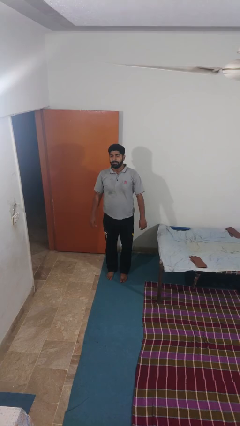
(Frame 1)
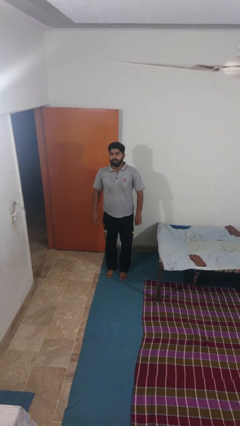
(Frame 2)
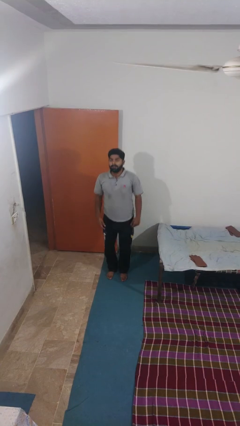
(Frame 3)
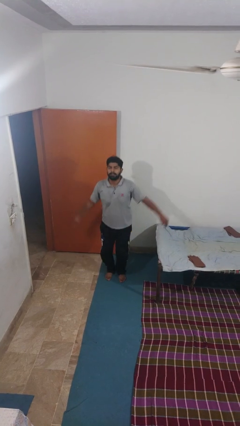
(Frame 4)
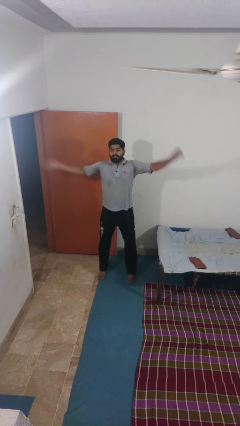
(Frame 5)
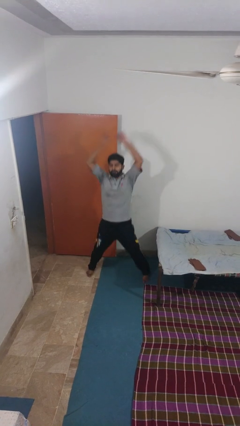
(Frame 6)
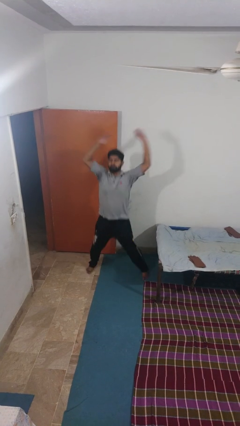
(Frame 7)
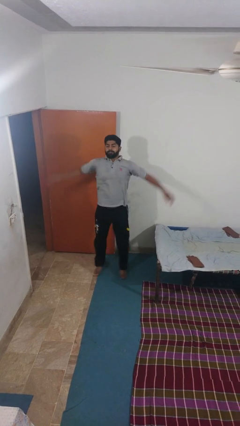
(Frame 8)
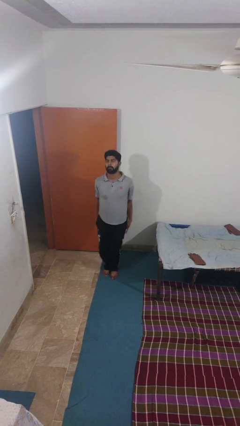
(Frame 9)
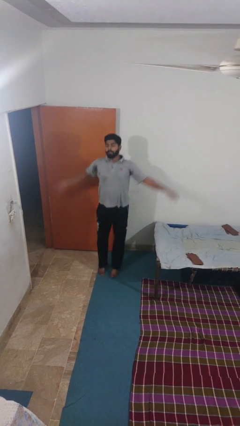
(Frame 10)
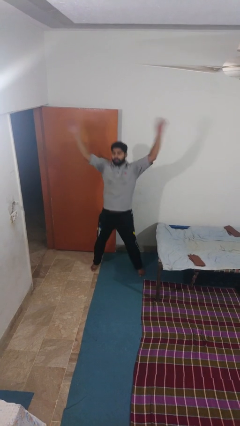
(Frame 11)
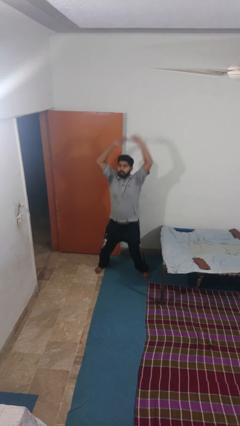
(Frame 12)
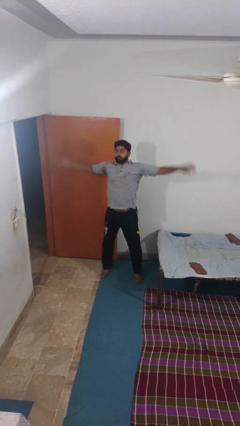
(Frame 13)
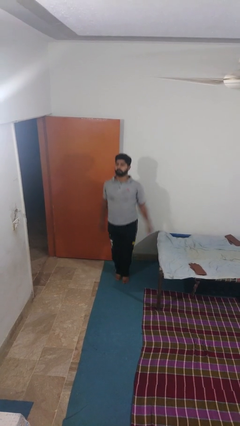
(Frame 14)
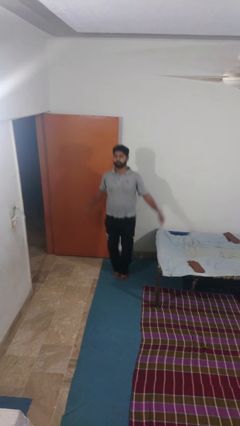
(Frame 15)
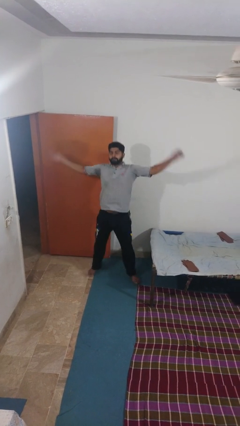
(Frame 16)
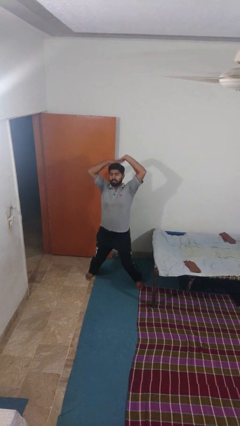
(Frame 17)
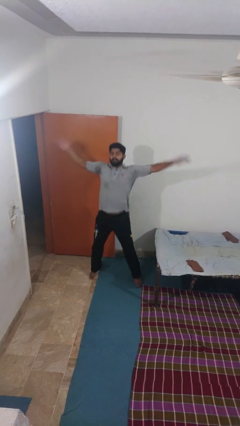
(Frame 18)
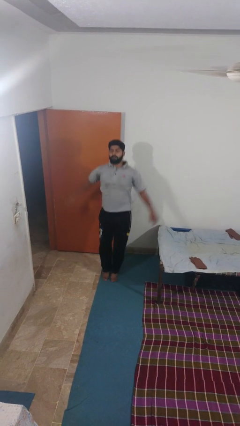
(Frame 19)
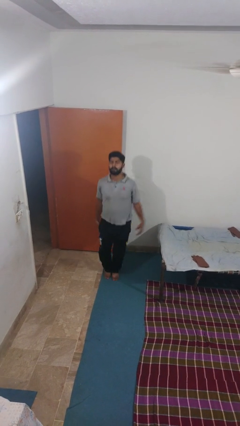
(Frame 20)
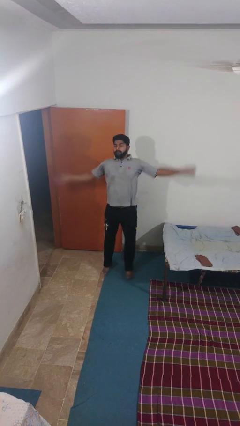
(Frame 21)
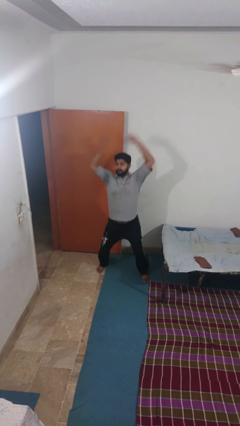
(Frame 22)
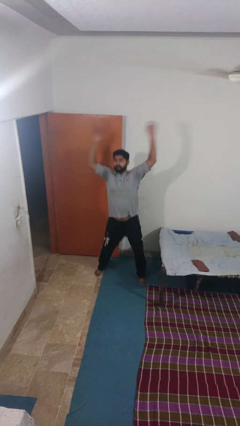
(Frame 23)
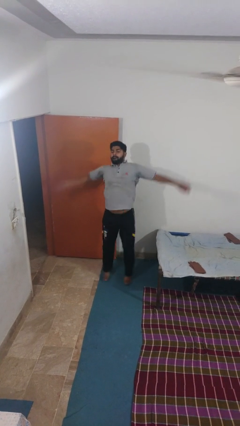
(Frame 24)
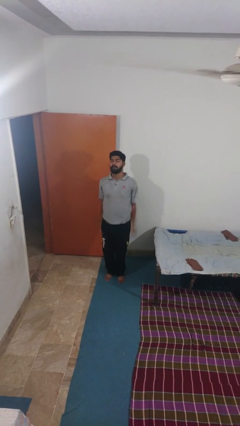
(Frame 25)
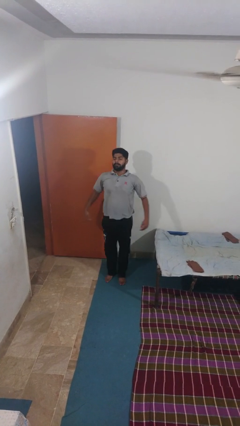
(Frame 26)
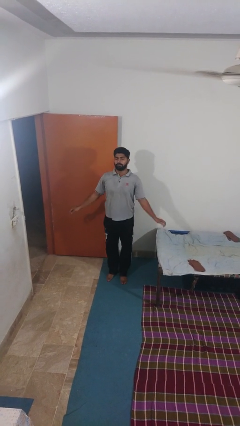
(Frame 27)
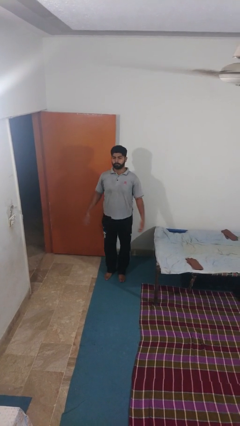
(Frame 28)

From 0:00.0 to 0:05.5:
person exercises with jumping jacks

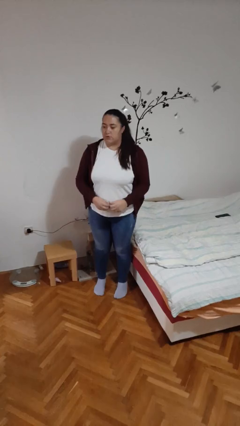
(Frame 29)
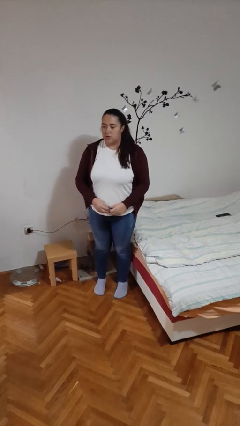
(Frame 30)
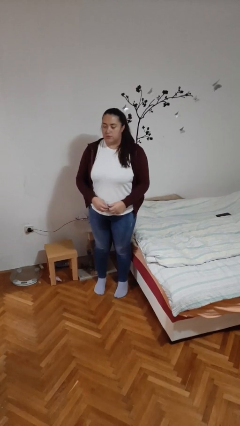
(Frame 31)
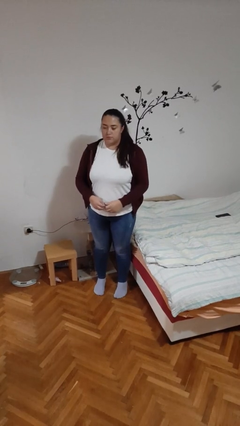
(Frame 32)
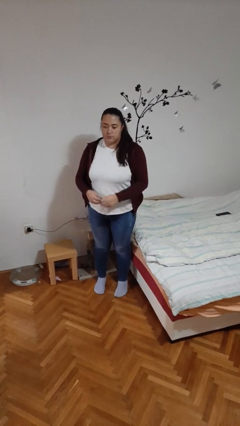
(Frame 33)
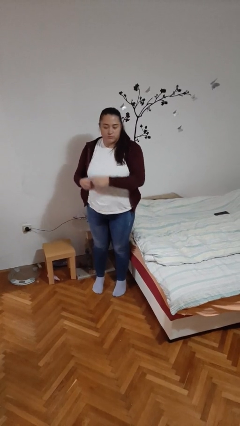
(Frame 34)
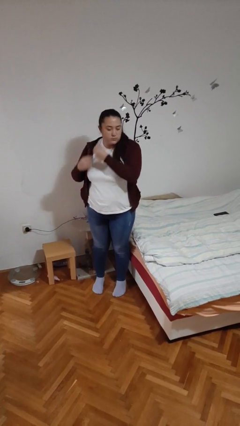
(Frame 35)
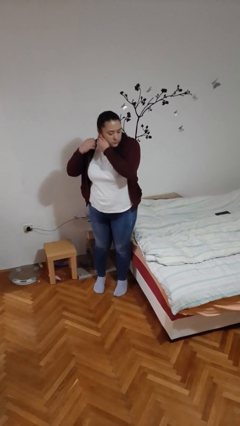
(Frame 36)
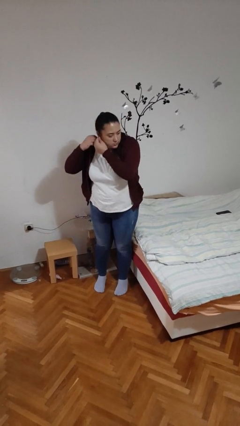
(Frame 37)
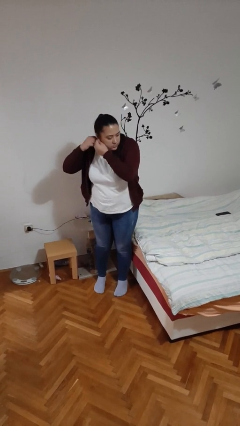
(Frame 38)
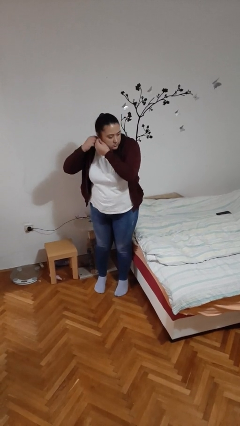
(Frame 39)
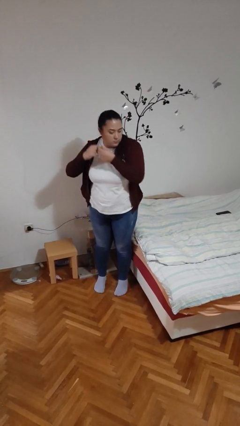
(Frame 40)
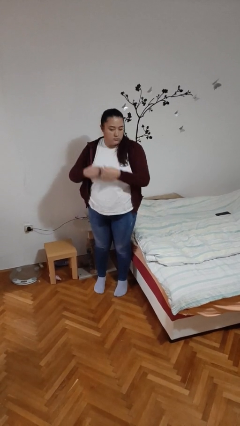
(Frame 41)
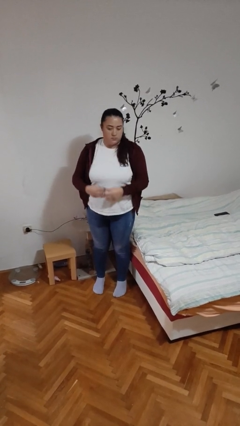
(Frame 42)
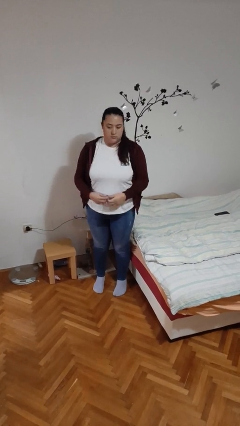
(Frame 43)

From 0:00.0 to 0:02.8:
person puts on earrings

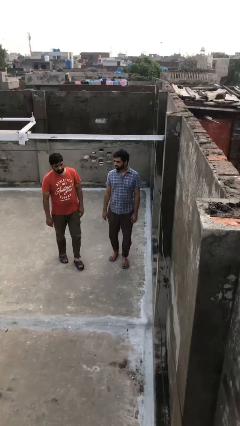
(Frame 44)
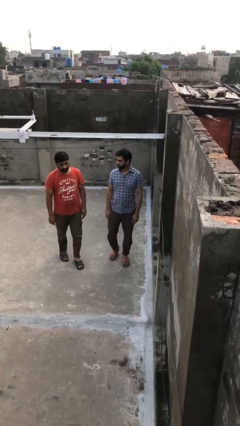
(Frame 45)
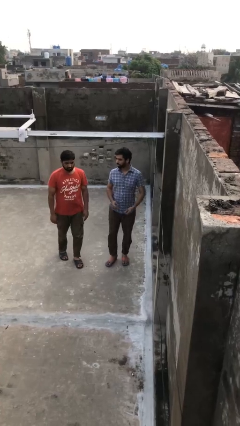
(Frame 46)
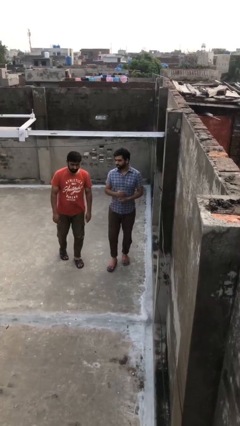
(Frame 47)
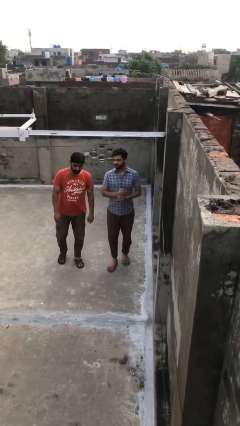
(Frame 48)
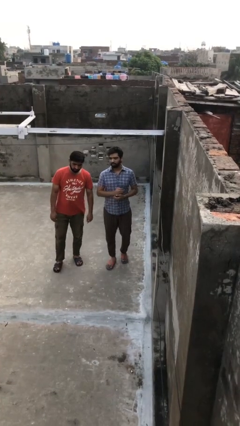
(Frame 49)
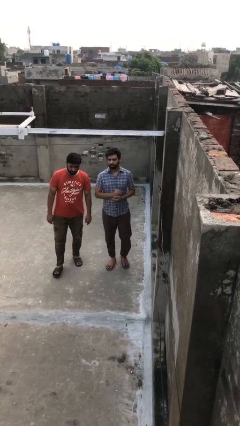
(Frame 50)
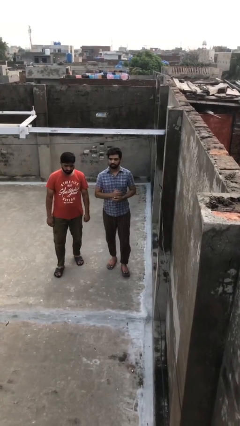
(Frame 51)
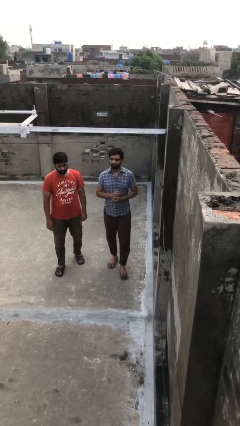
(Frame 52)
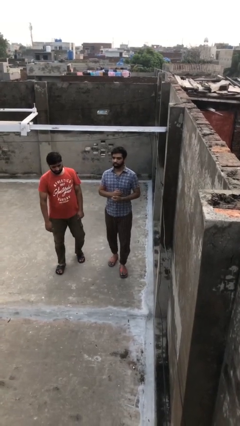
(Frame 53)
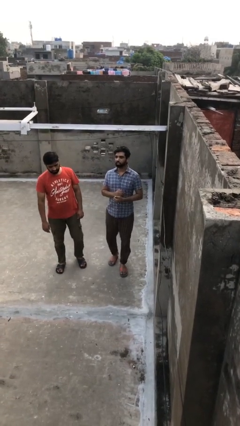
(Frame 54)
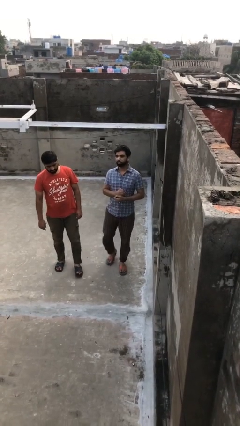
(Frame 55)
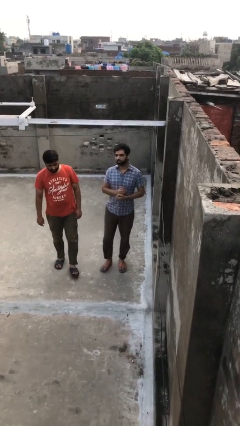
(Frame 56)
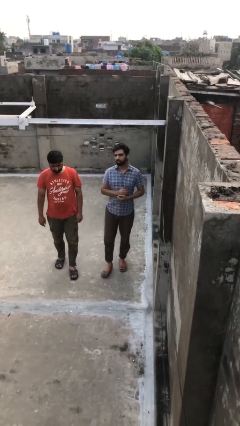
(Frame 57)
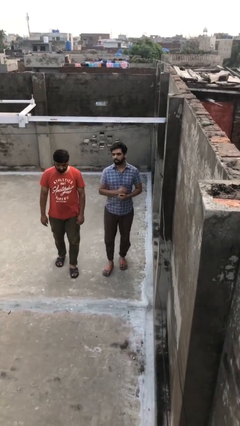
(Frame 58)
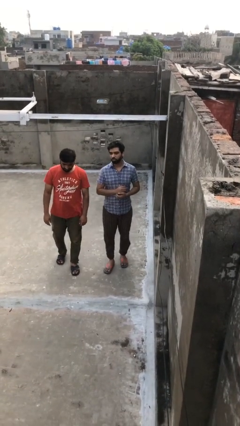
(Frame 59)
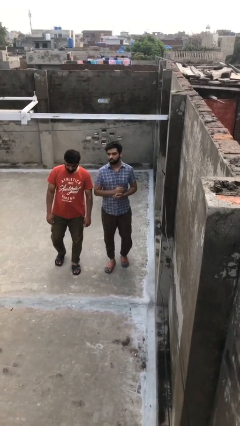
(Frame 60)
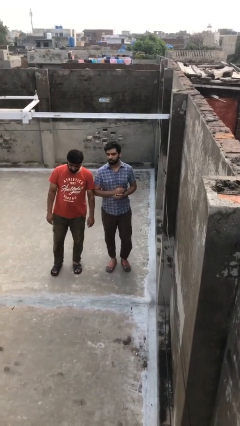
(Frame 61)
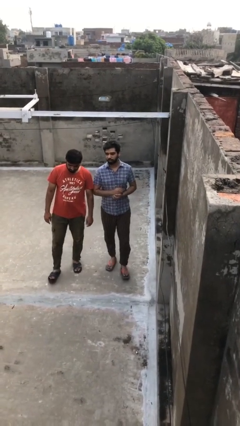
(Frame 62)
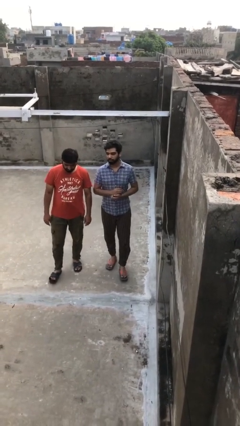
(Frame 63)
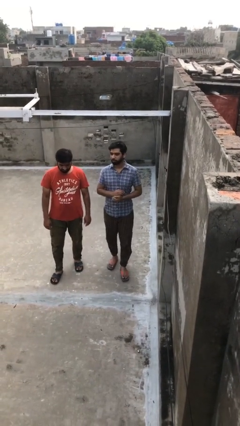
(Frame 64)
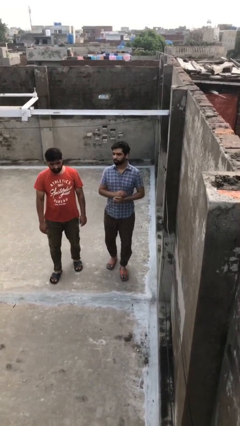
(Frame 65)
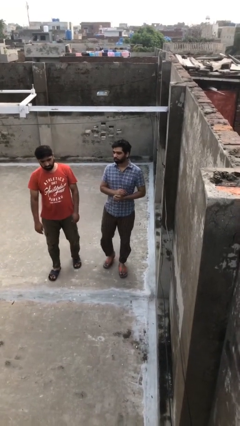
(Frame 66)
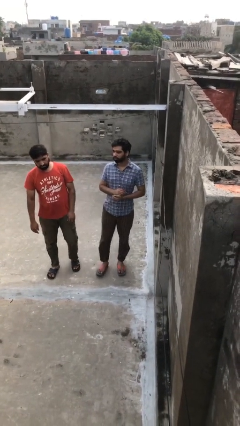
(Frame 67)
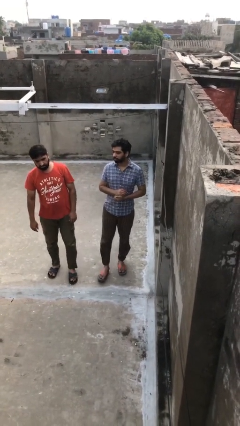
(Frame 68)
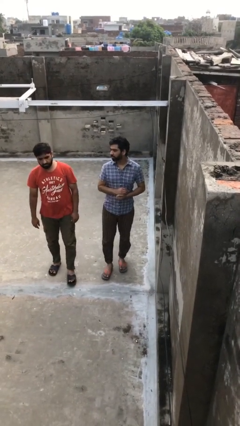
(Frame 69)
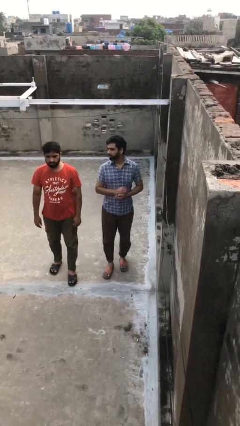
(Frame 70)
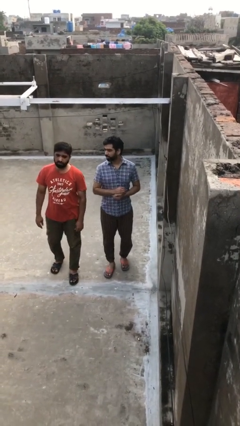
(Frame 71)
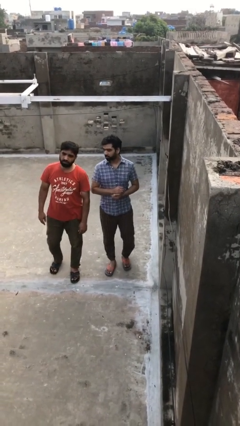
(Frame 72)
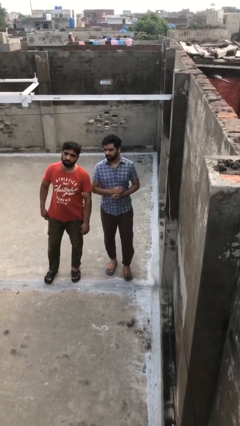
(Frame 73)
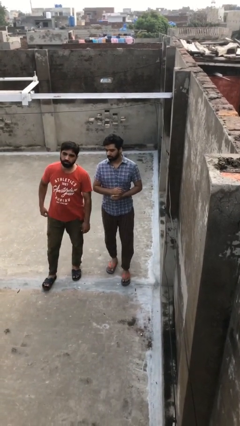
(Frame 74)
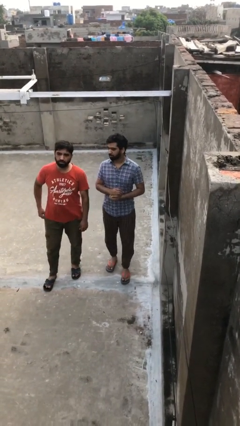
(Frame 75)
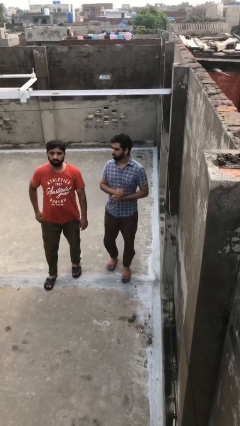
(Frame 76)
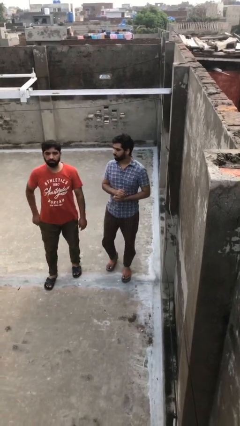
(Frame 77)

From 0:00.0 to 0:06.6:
person talks to person

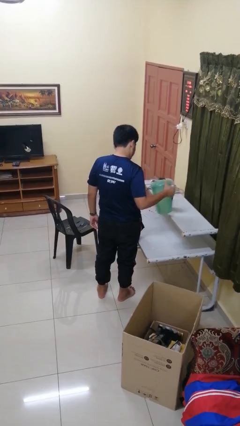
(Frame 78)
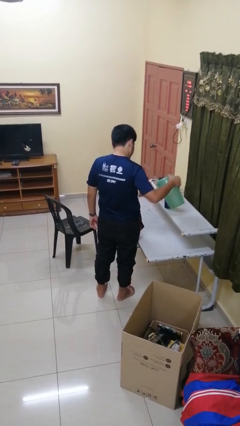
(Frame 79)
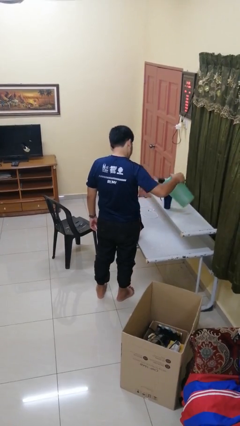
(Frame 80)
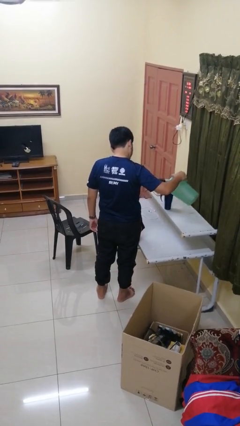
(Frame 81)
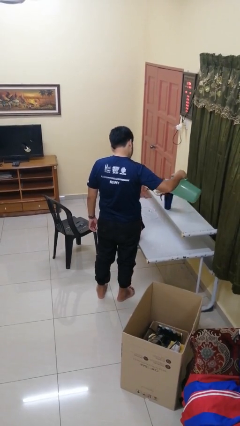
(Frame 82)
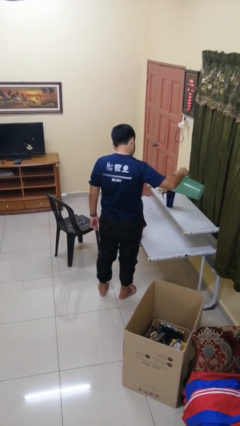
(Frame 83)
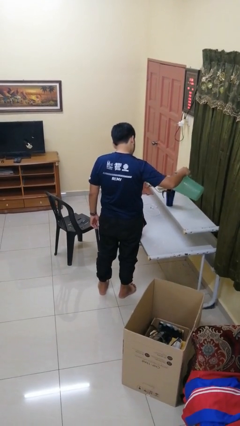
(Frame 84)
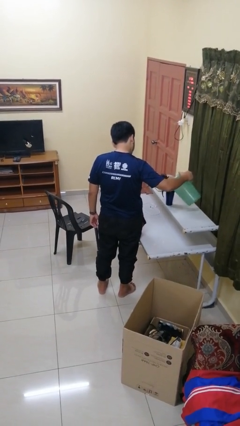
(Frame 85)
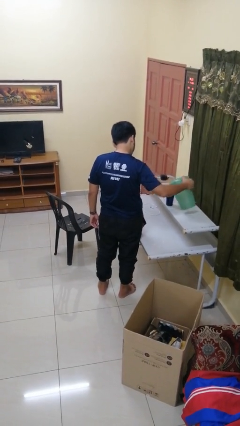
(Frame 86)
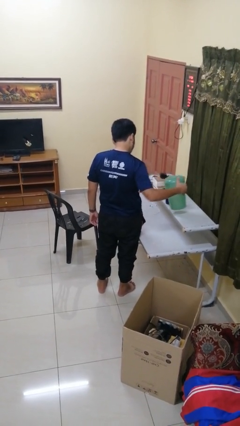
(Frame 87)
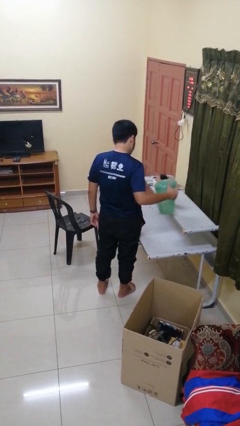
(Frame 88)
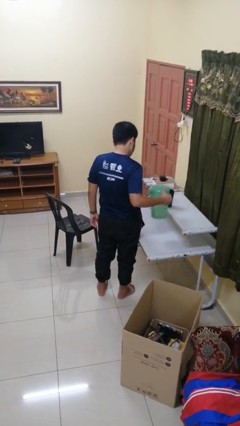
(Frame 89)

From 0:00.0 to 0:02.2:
person pours coffee into mug

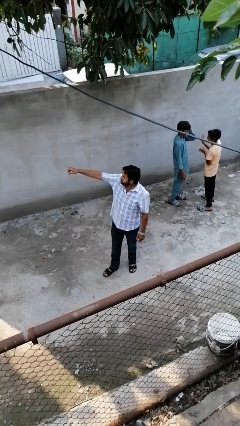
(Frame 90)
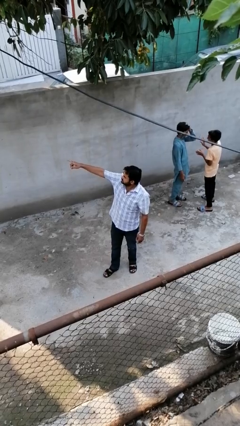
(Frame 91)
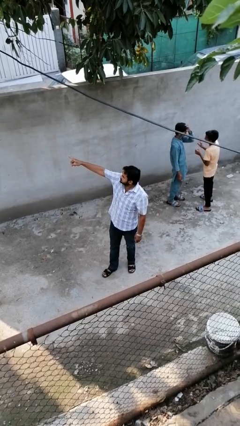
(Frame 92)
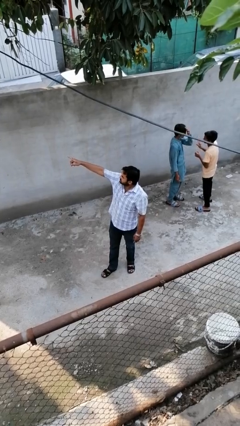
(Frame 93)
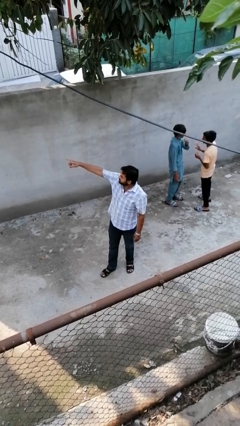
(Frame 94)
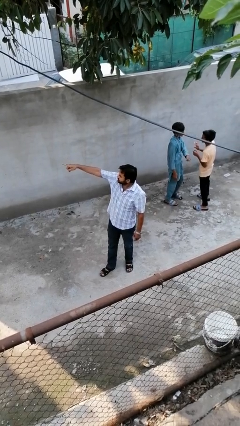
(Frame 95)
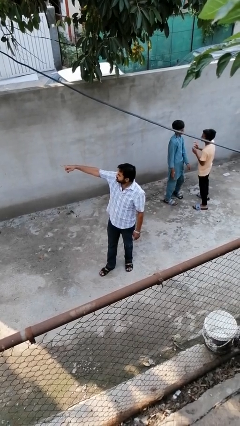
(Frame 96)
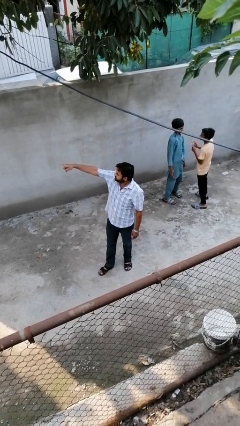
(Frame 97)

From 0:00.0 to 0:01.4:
person points at person
